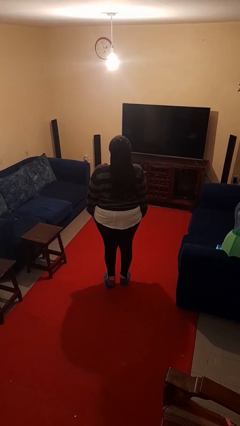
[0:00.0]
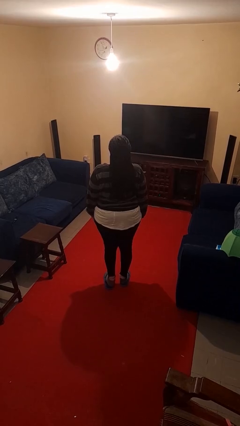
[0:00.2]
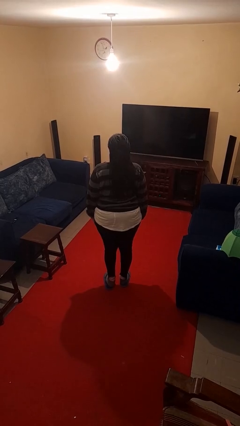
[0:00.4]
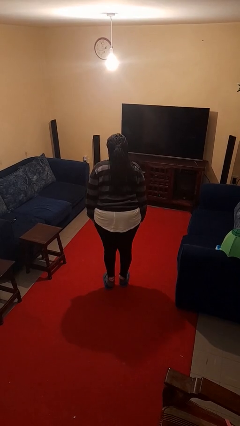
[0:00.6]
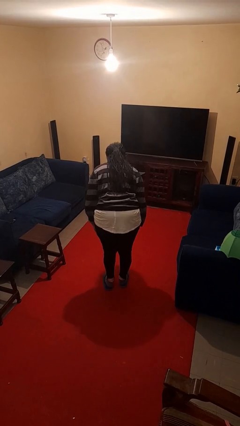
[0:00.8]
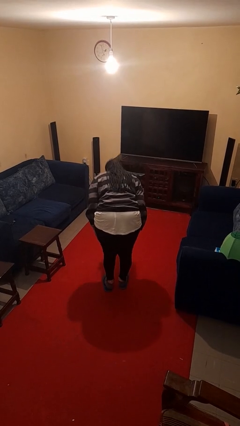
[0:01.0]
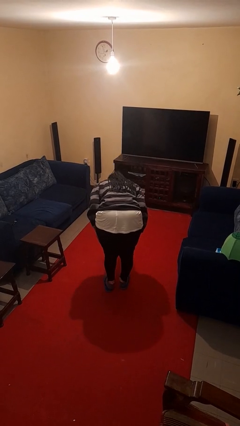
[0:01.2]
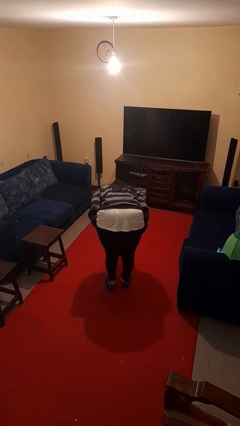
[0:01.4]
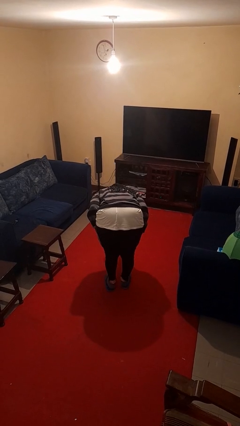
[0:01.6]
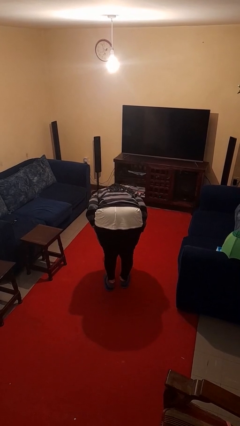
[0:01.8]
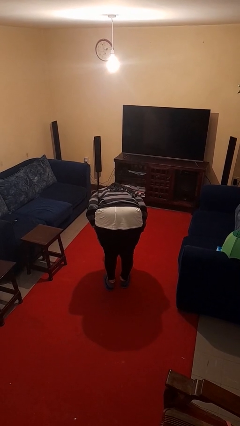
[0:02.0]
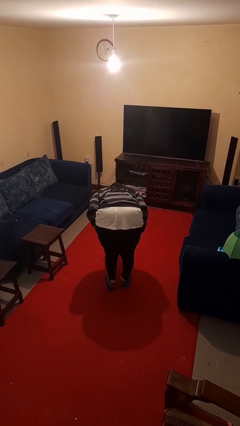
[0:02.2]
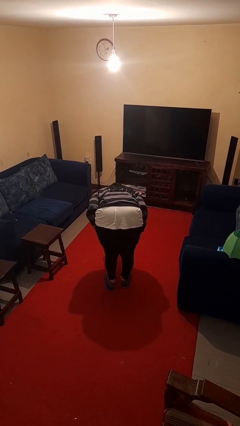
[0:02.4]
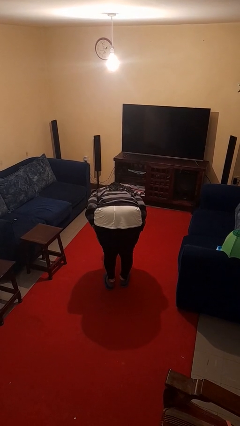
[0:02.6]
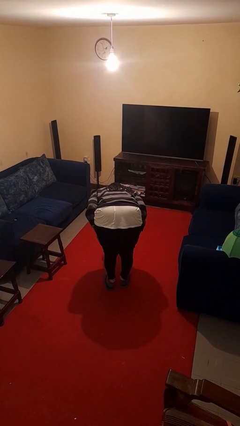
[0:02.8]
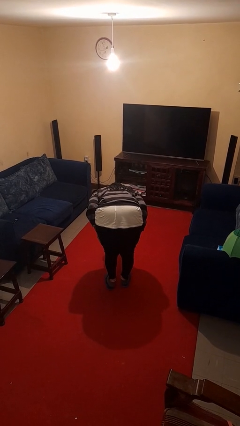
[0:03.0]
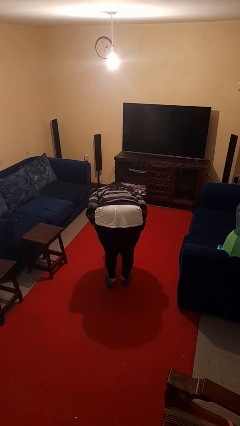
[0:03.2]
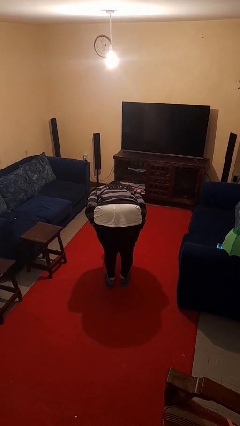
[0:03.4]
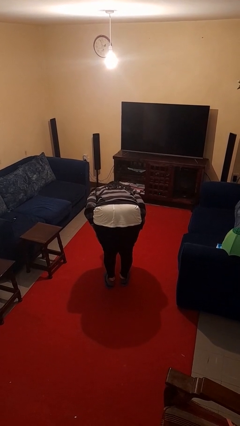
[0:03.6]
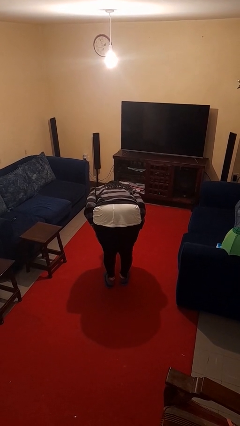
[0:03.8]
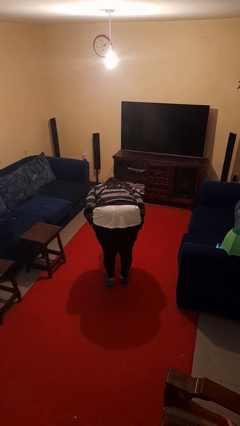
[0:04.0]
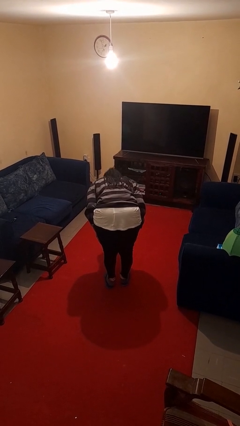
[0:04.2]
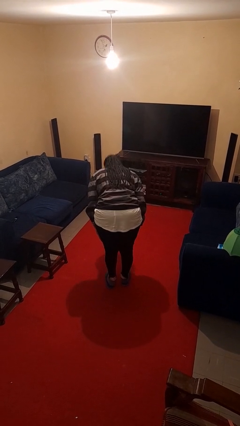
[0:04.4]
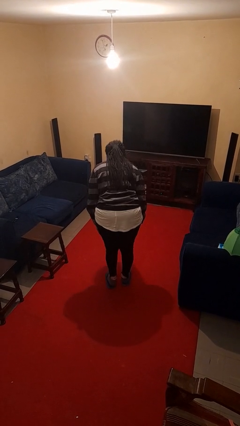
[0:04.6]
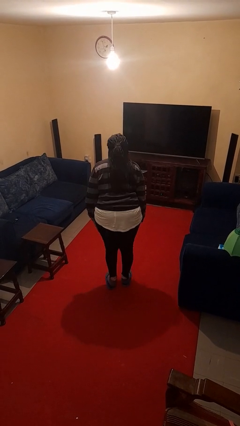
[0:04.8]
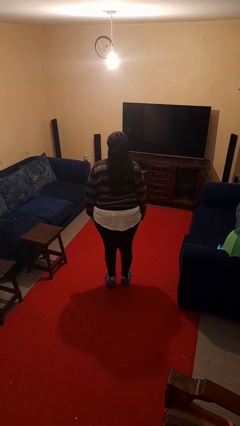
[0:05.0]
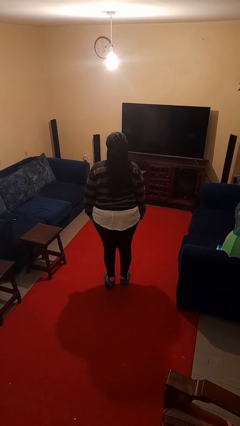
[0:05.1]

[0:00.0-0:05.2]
person bows

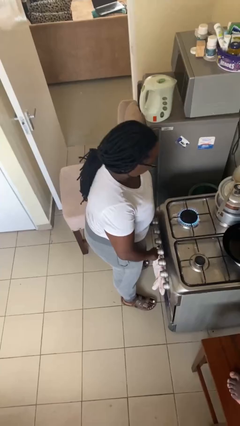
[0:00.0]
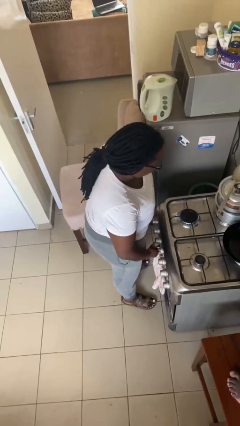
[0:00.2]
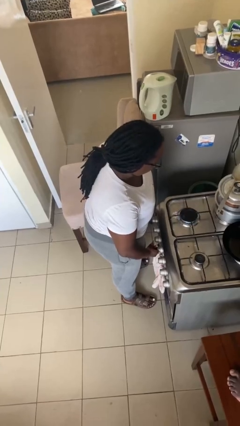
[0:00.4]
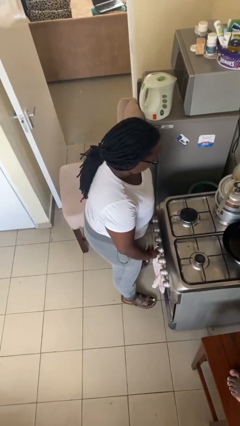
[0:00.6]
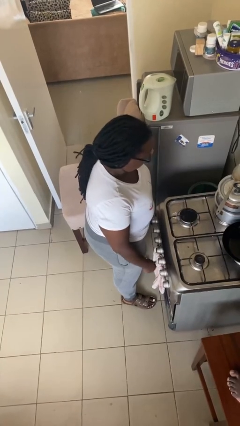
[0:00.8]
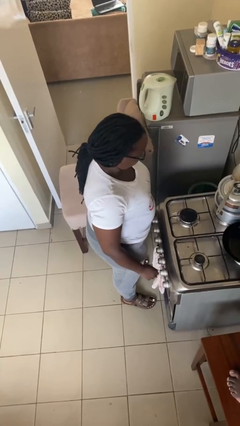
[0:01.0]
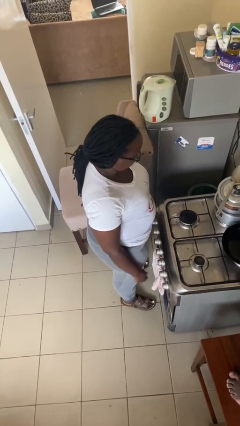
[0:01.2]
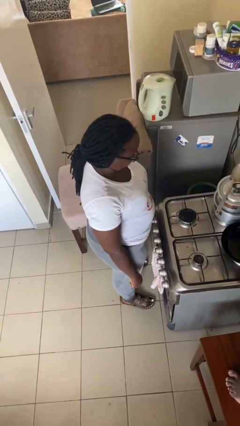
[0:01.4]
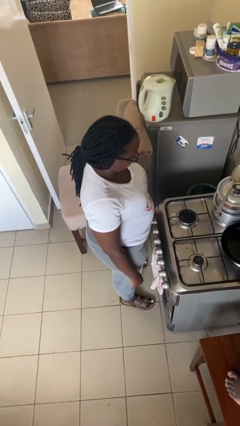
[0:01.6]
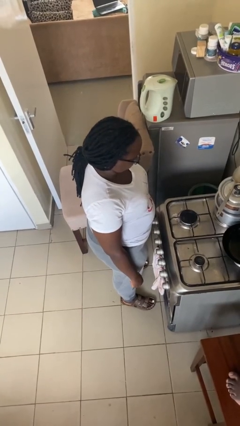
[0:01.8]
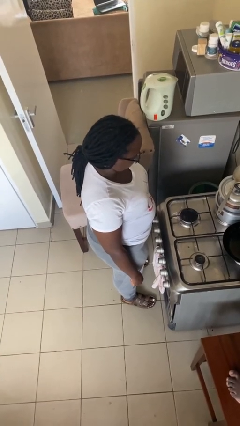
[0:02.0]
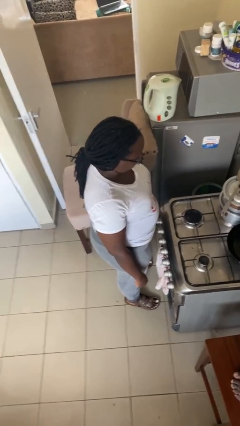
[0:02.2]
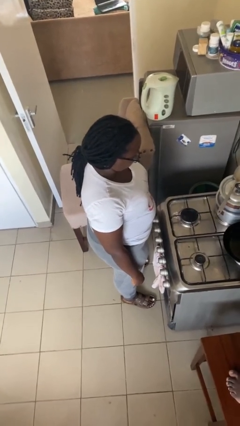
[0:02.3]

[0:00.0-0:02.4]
person turns off stovetop

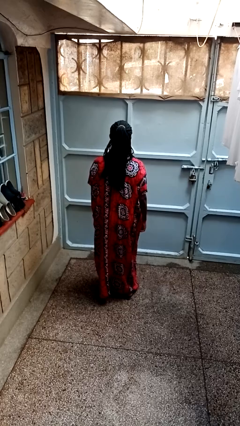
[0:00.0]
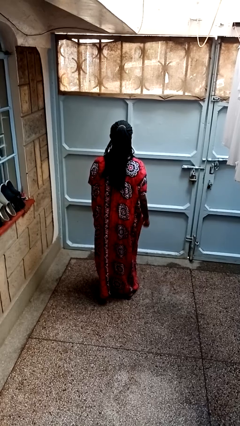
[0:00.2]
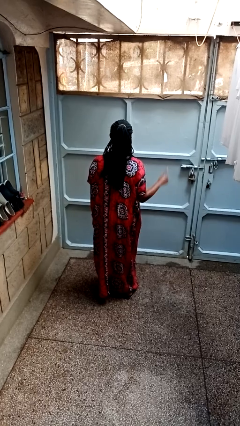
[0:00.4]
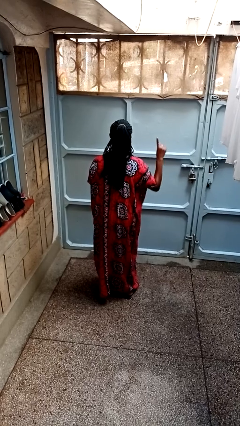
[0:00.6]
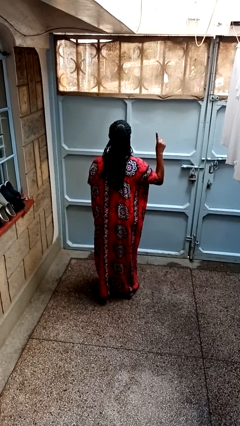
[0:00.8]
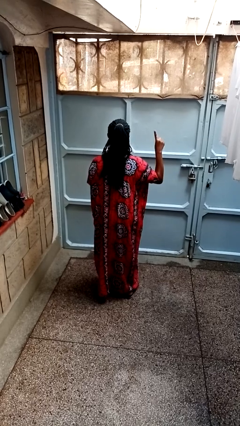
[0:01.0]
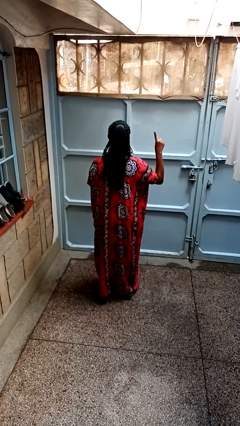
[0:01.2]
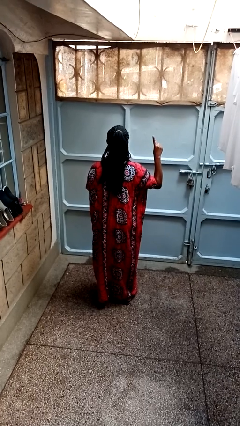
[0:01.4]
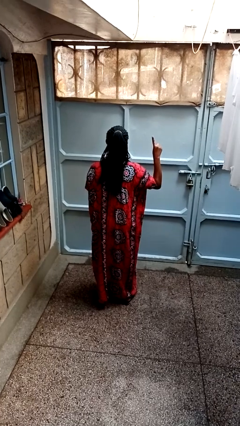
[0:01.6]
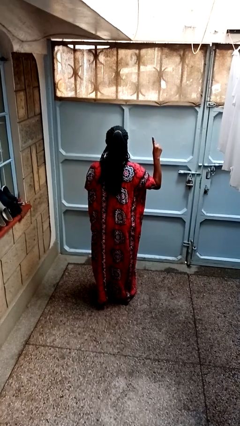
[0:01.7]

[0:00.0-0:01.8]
person gestures number one

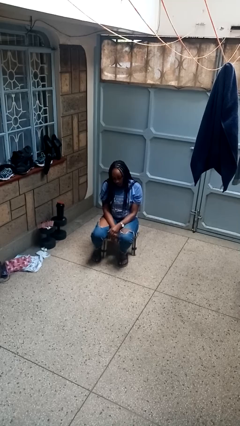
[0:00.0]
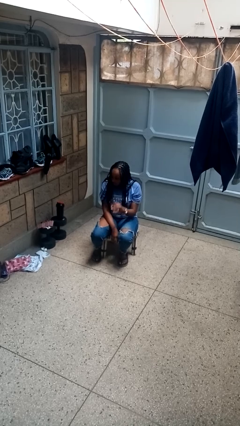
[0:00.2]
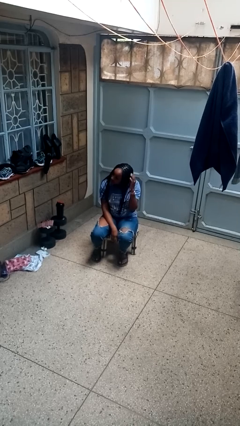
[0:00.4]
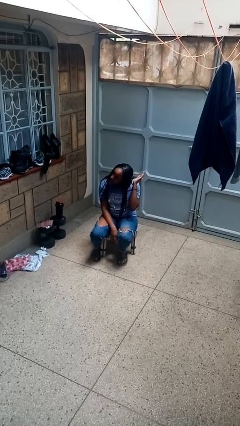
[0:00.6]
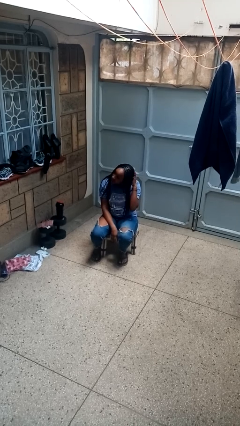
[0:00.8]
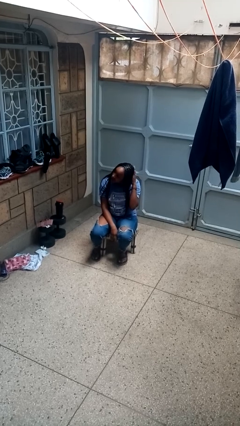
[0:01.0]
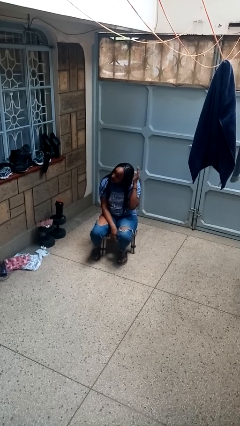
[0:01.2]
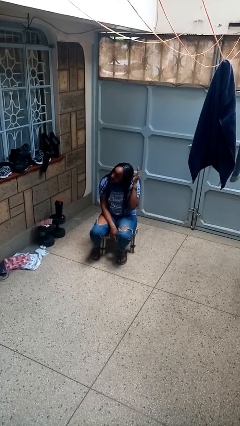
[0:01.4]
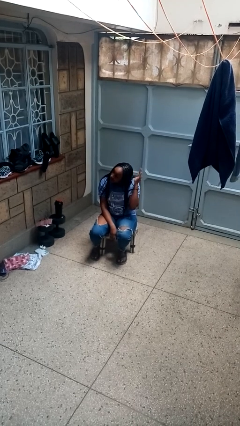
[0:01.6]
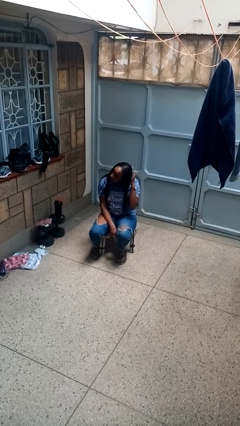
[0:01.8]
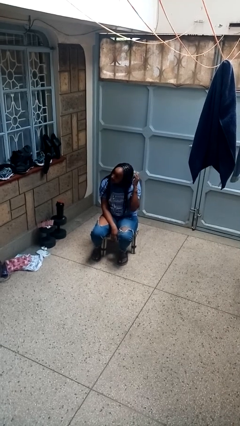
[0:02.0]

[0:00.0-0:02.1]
person pats head

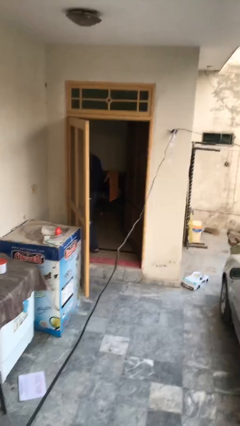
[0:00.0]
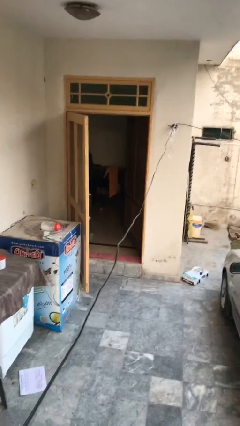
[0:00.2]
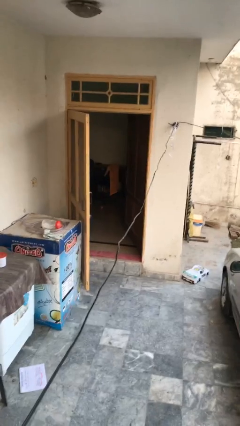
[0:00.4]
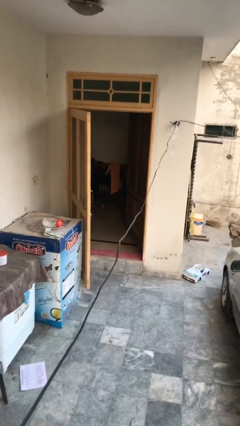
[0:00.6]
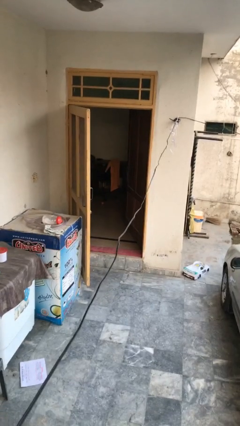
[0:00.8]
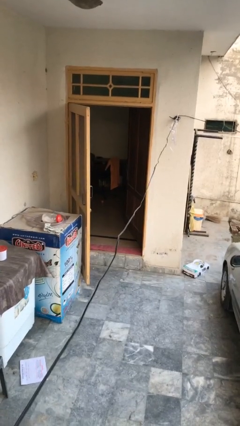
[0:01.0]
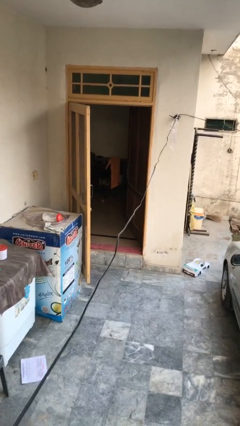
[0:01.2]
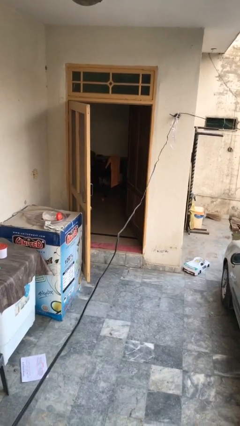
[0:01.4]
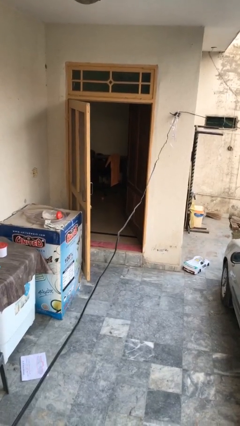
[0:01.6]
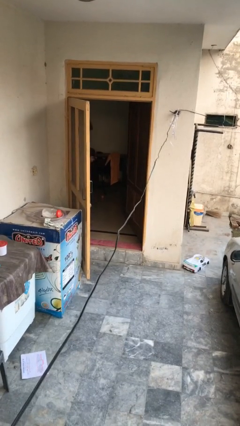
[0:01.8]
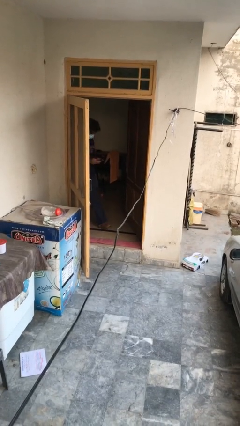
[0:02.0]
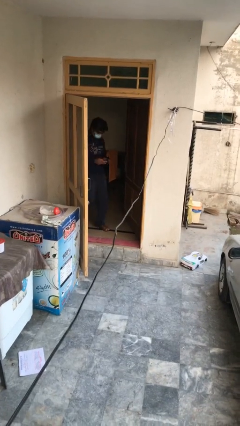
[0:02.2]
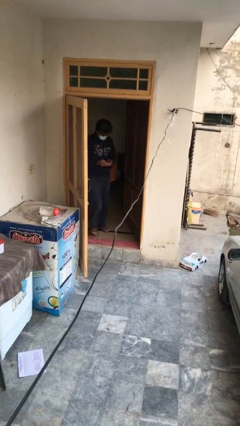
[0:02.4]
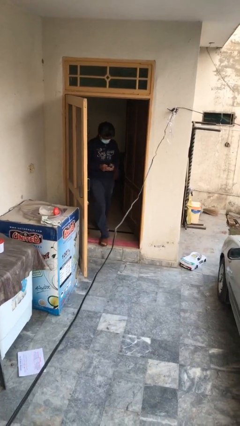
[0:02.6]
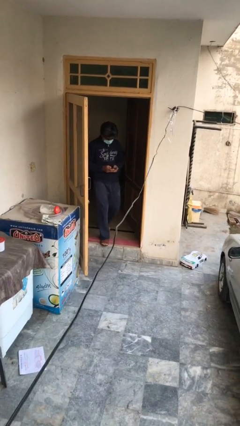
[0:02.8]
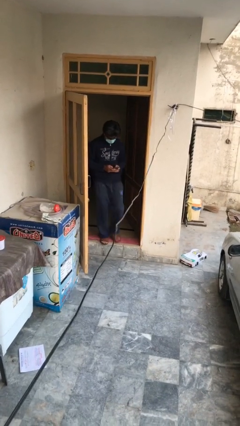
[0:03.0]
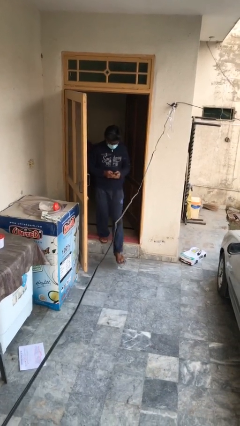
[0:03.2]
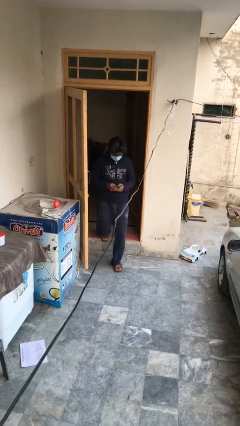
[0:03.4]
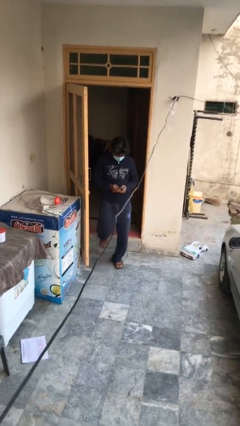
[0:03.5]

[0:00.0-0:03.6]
person enters scene through structure

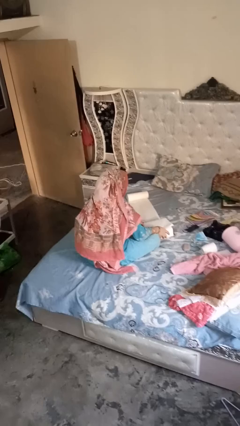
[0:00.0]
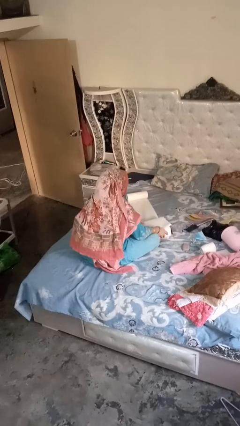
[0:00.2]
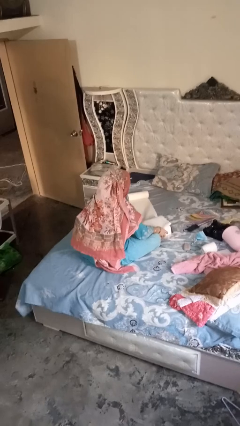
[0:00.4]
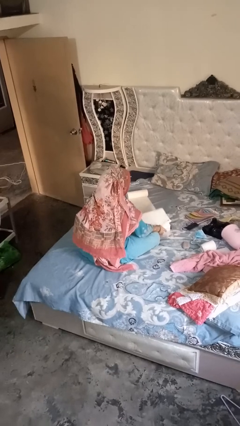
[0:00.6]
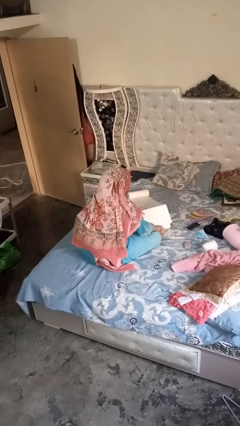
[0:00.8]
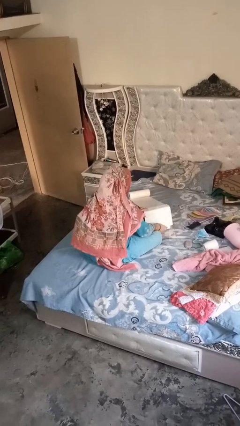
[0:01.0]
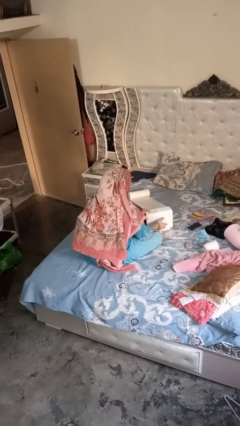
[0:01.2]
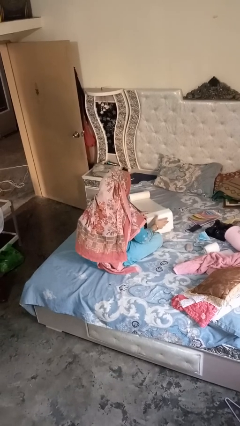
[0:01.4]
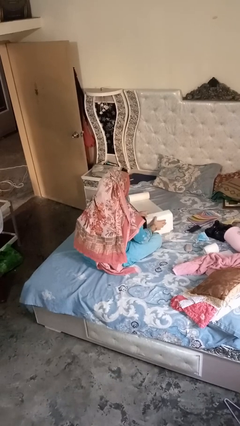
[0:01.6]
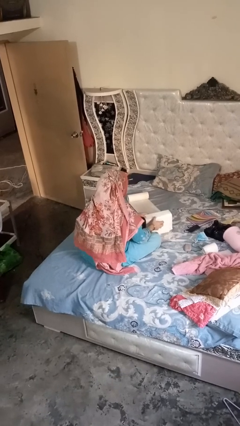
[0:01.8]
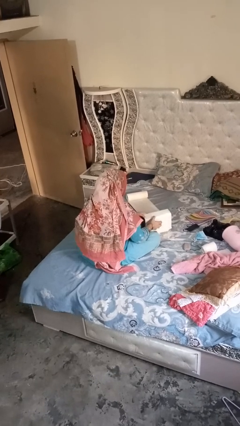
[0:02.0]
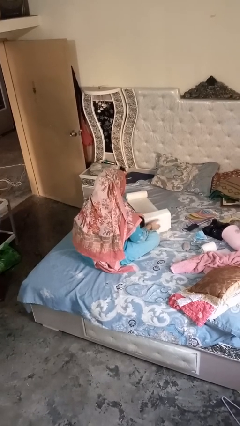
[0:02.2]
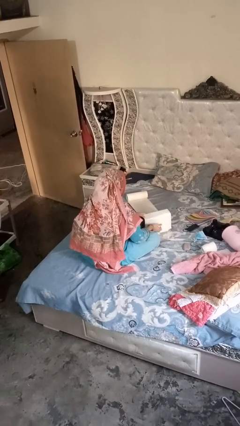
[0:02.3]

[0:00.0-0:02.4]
person wraps box
